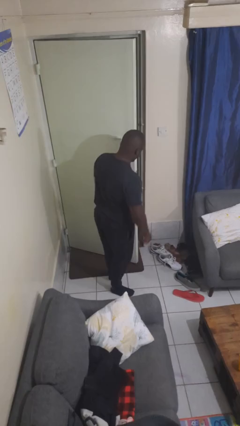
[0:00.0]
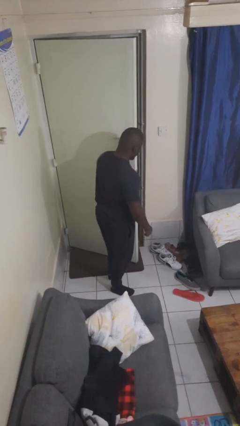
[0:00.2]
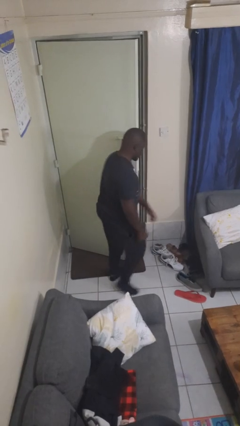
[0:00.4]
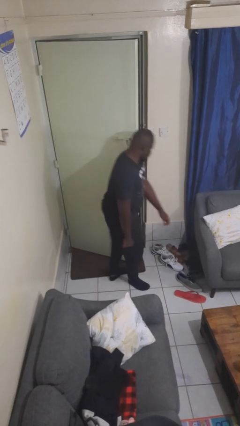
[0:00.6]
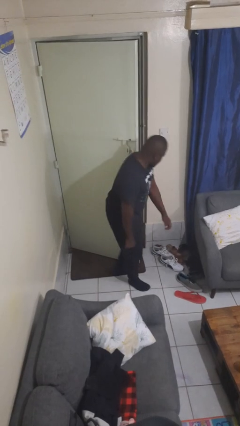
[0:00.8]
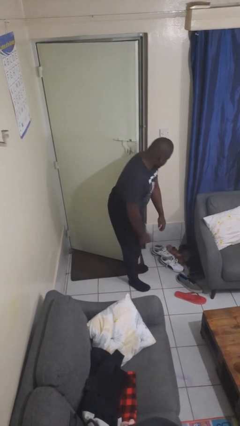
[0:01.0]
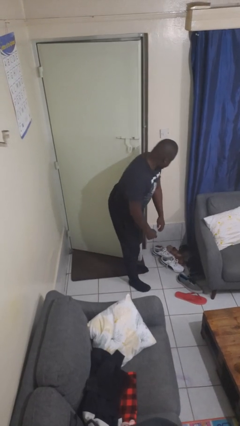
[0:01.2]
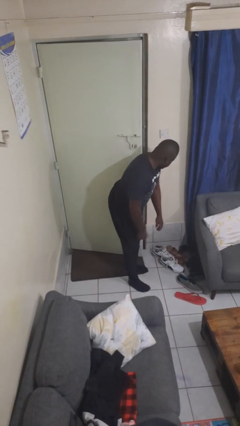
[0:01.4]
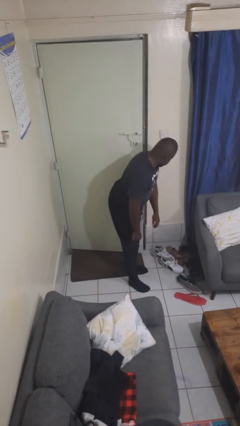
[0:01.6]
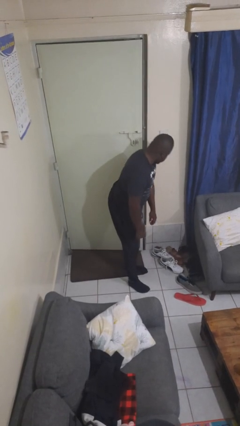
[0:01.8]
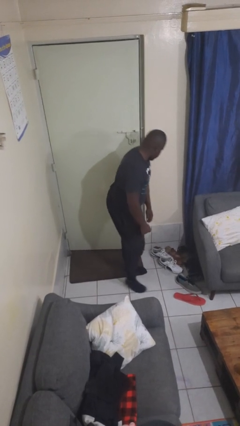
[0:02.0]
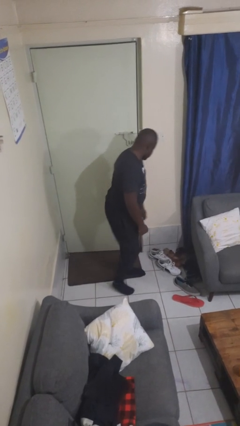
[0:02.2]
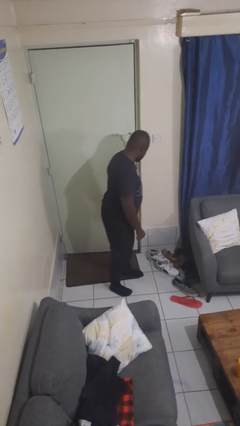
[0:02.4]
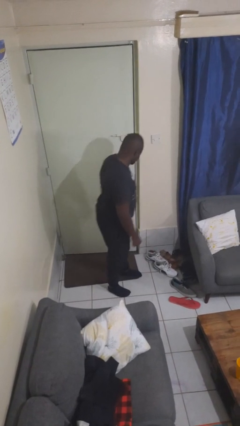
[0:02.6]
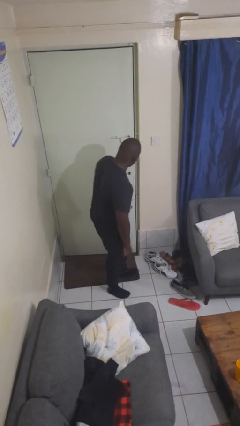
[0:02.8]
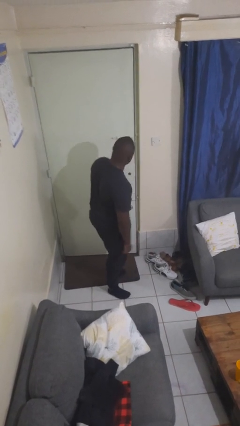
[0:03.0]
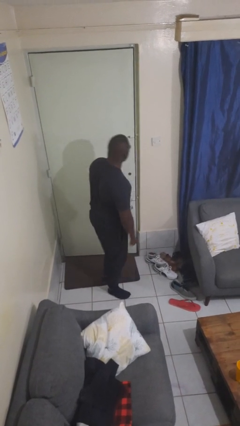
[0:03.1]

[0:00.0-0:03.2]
person closes door with hip

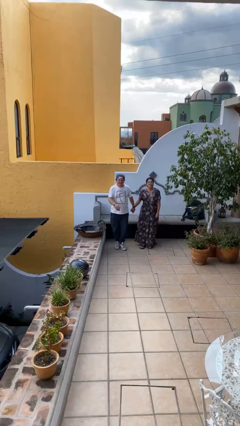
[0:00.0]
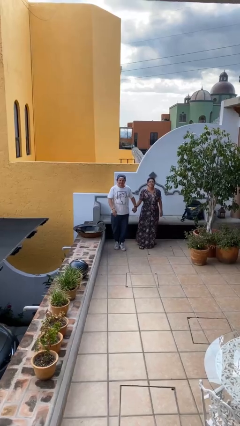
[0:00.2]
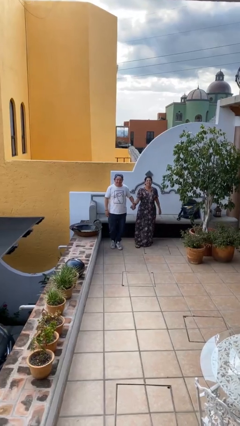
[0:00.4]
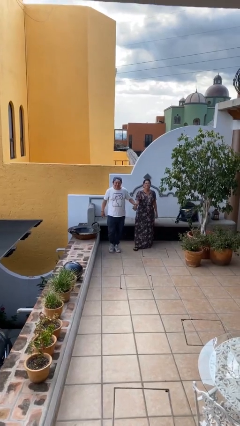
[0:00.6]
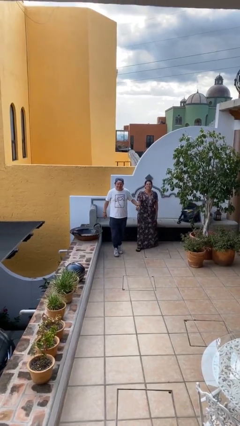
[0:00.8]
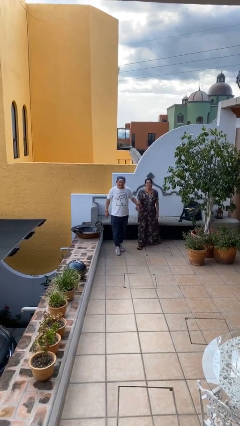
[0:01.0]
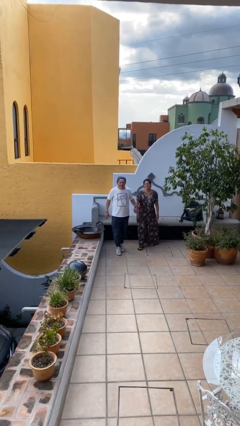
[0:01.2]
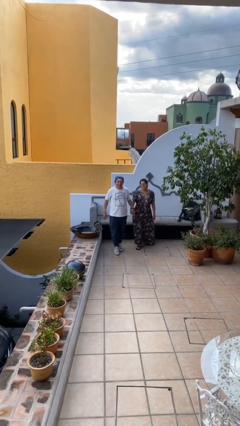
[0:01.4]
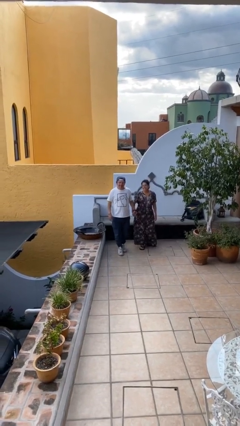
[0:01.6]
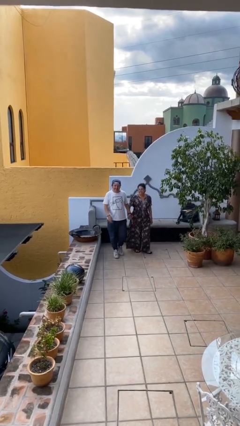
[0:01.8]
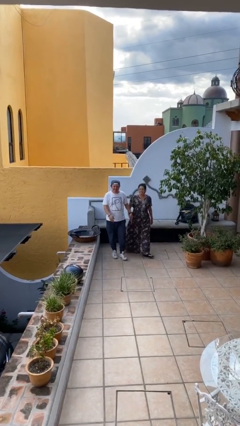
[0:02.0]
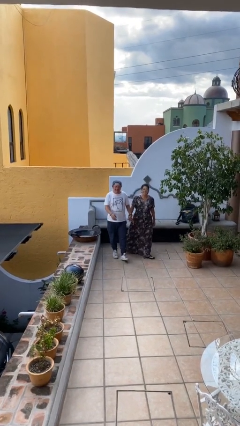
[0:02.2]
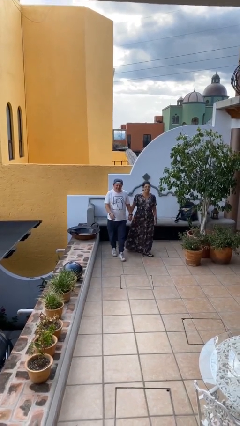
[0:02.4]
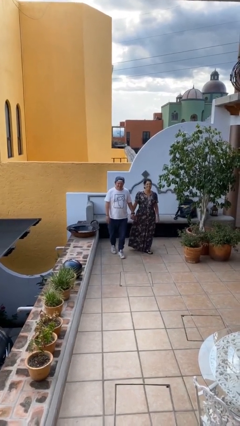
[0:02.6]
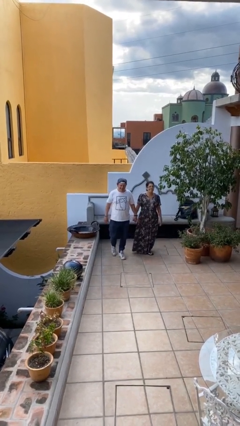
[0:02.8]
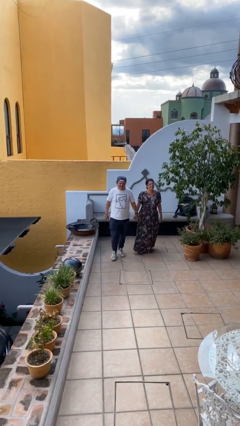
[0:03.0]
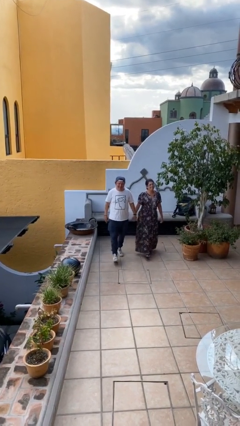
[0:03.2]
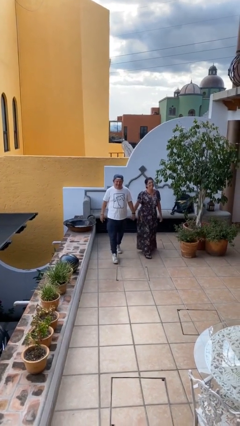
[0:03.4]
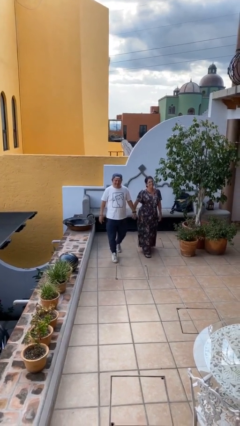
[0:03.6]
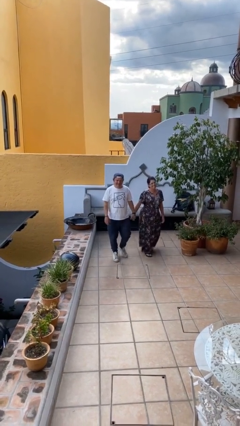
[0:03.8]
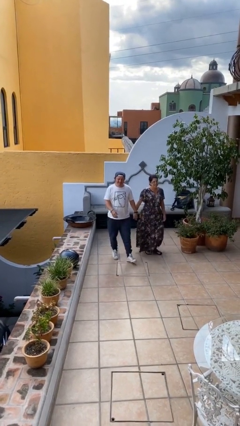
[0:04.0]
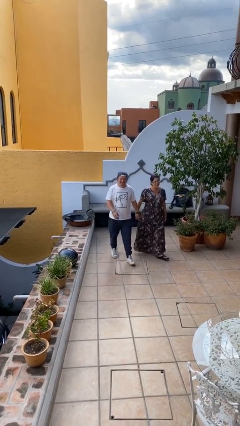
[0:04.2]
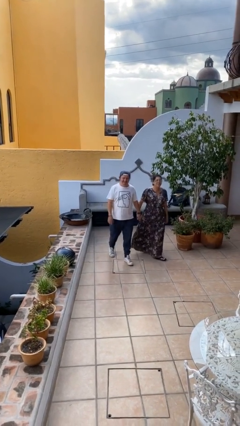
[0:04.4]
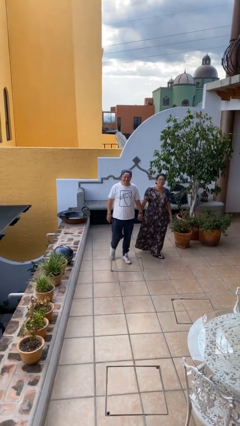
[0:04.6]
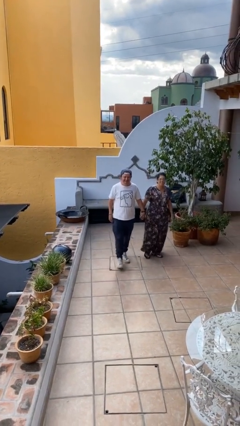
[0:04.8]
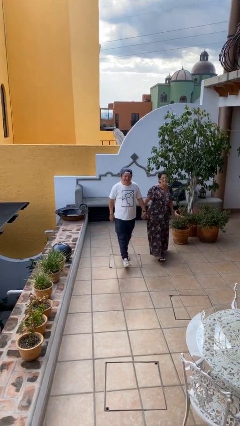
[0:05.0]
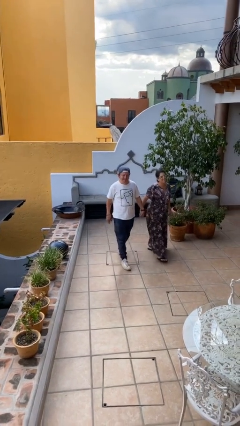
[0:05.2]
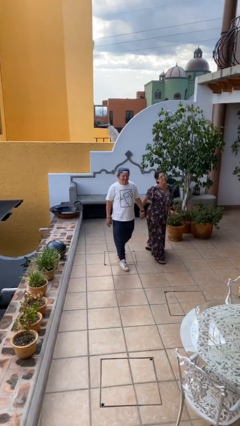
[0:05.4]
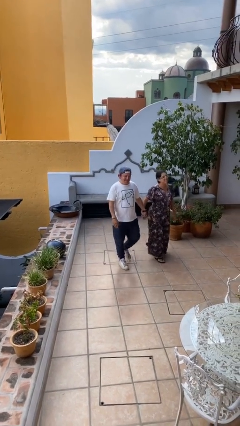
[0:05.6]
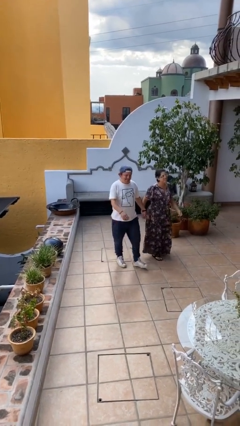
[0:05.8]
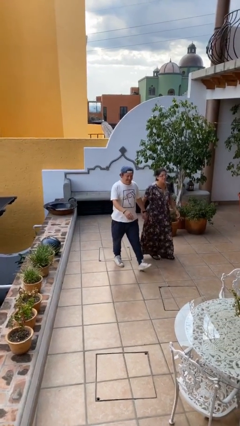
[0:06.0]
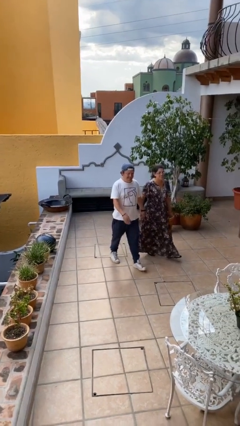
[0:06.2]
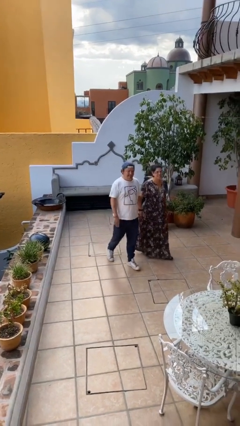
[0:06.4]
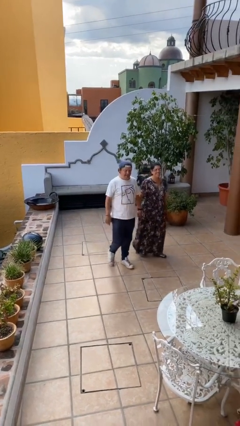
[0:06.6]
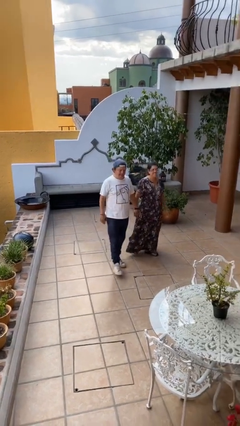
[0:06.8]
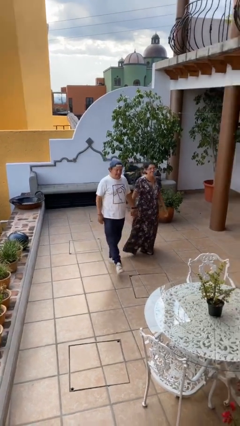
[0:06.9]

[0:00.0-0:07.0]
person holds hand

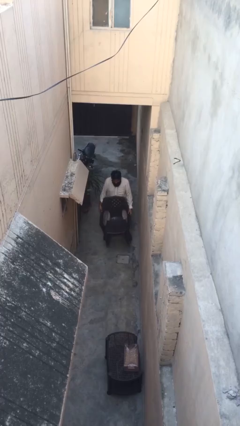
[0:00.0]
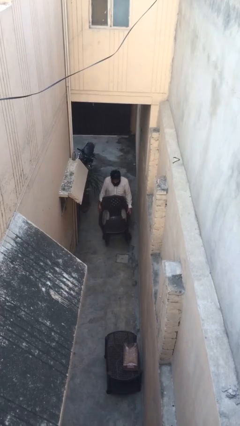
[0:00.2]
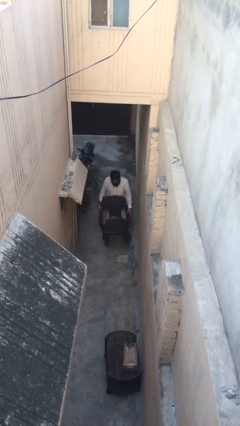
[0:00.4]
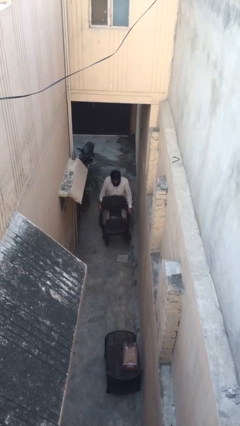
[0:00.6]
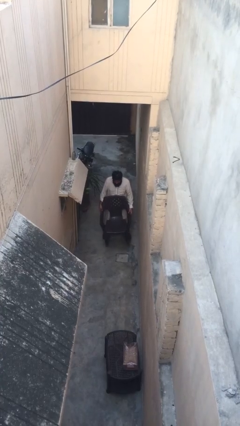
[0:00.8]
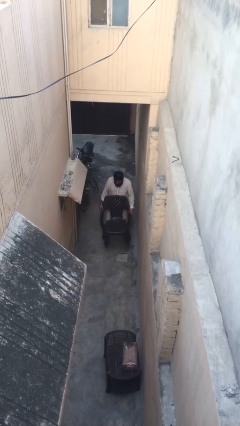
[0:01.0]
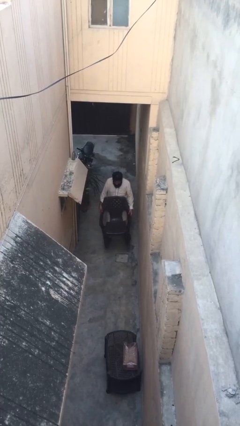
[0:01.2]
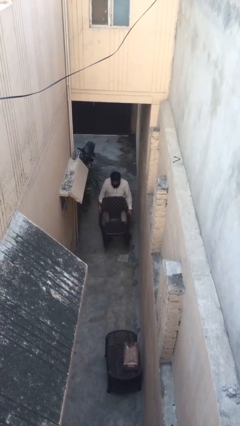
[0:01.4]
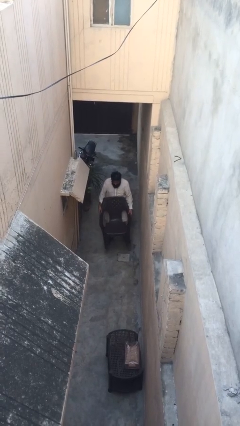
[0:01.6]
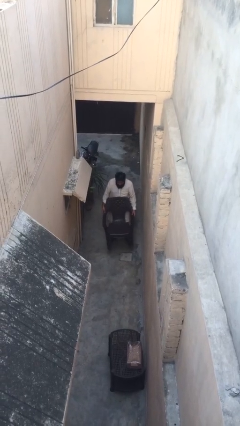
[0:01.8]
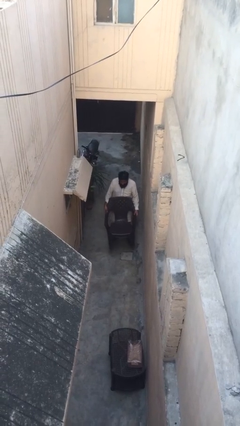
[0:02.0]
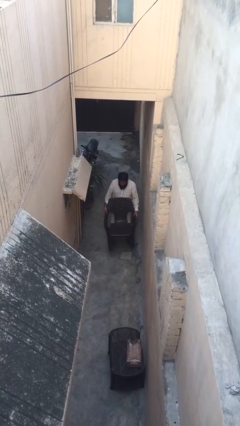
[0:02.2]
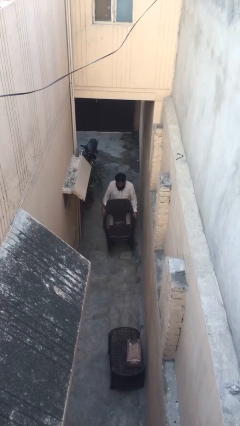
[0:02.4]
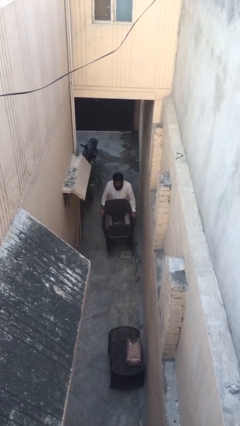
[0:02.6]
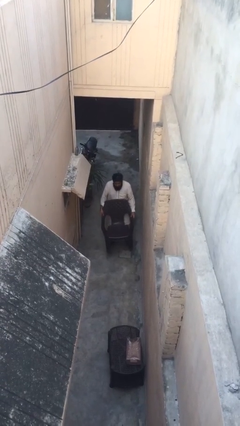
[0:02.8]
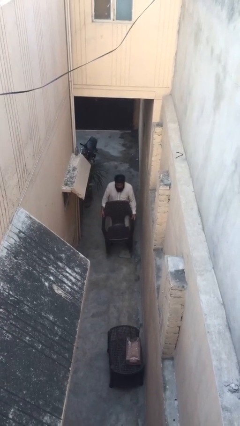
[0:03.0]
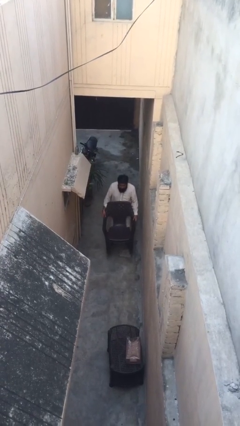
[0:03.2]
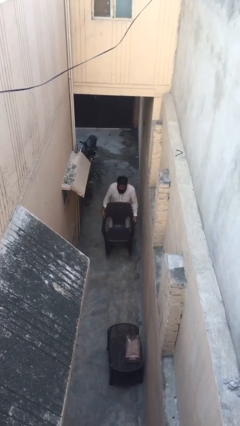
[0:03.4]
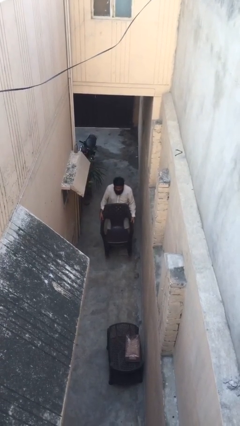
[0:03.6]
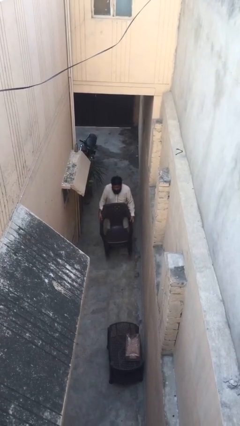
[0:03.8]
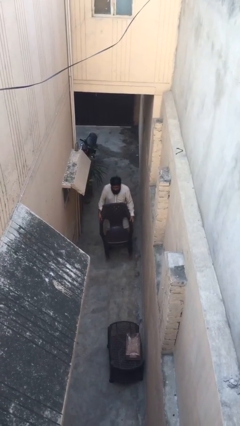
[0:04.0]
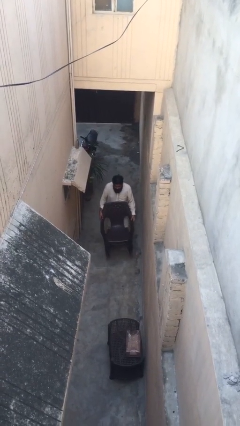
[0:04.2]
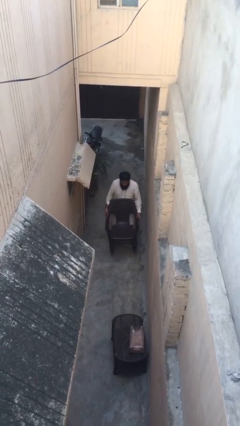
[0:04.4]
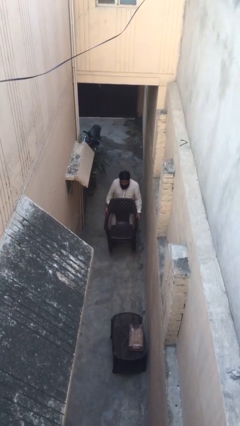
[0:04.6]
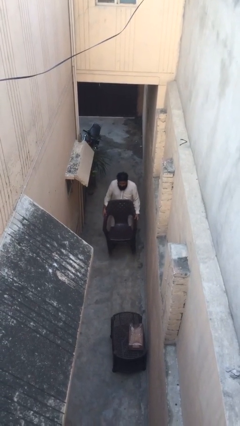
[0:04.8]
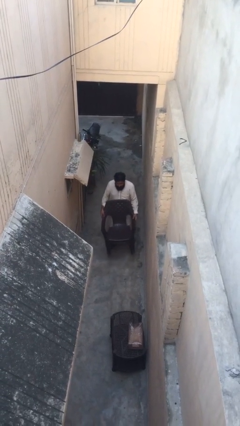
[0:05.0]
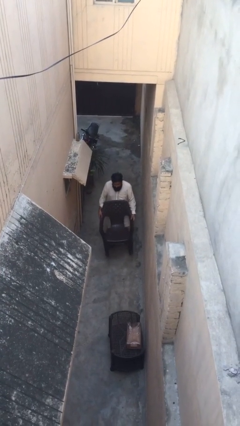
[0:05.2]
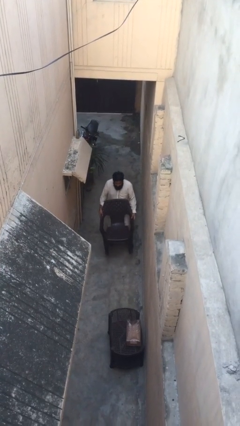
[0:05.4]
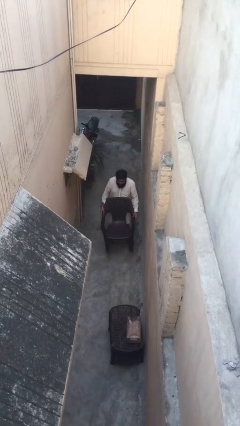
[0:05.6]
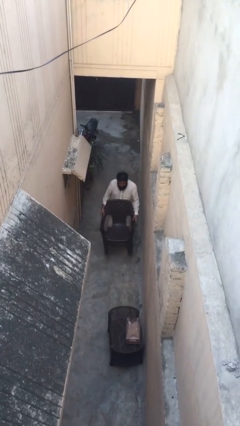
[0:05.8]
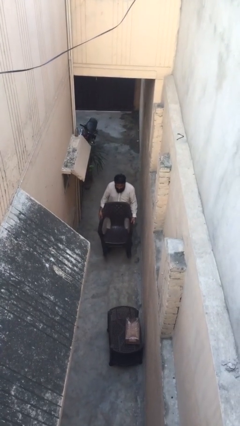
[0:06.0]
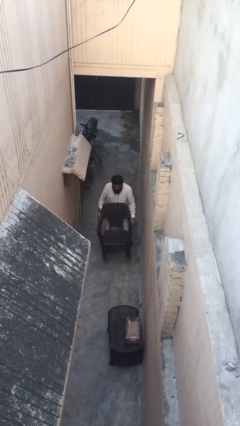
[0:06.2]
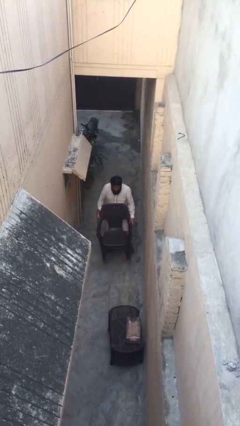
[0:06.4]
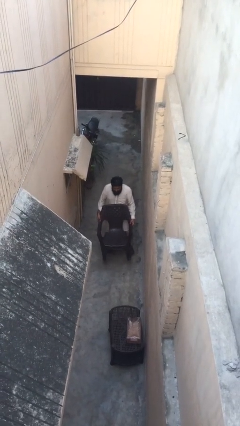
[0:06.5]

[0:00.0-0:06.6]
person carries heavy object

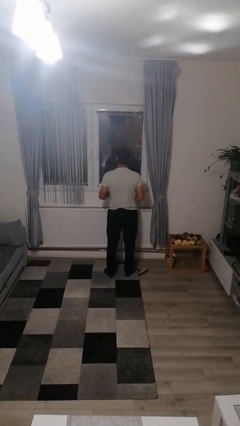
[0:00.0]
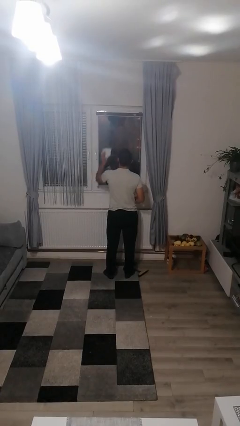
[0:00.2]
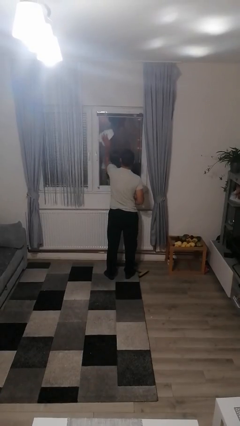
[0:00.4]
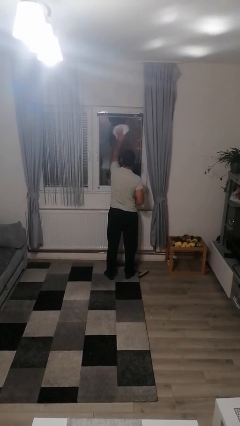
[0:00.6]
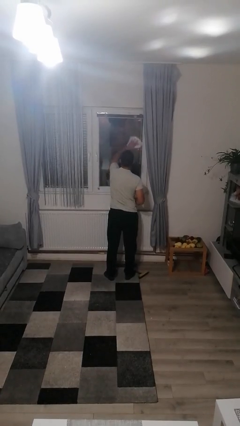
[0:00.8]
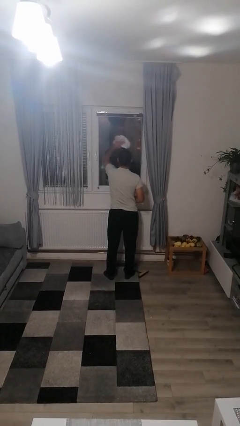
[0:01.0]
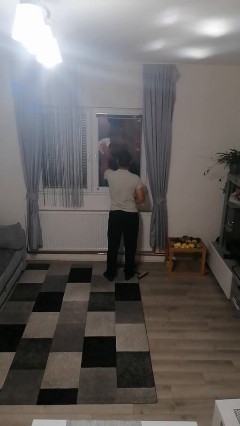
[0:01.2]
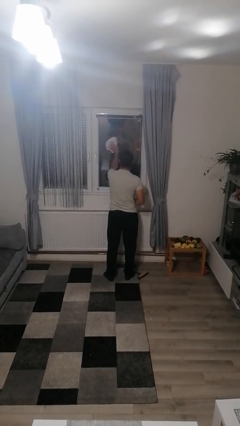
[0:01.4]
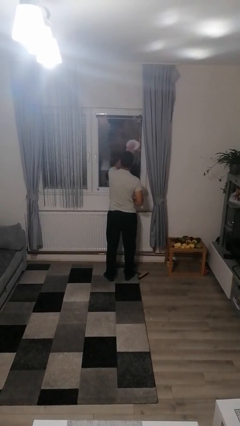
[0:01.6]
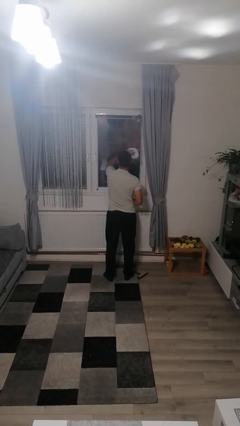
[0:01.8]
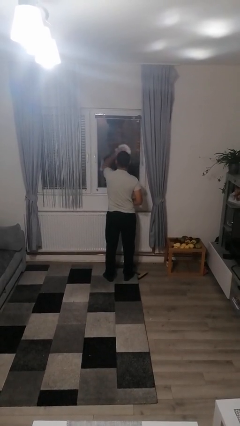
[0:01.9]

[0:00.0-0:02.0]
person washes window
